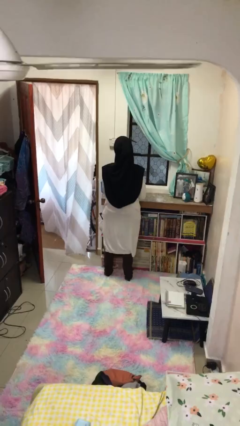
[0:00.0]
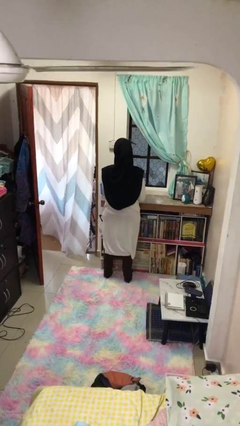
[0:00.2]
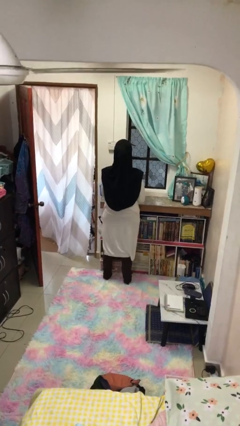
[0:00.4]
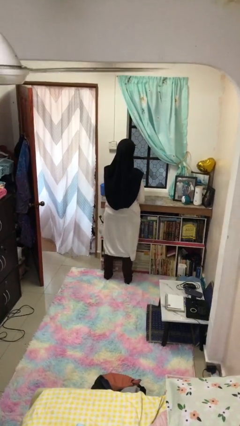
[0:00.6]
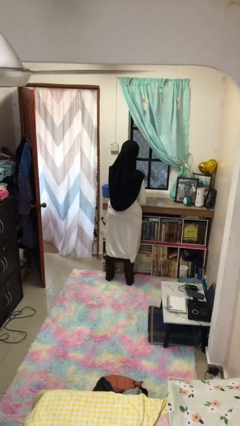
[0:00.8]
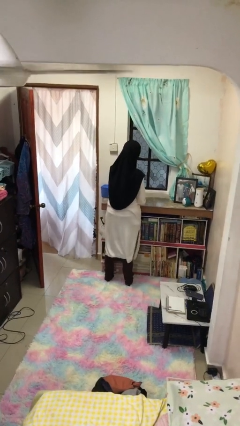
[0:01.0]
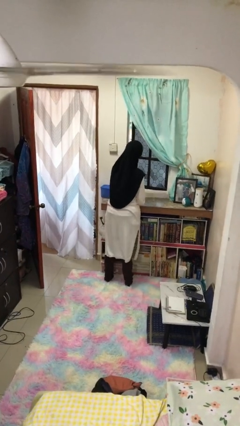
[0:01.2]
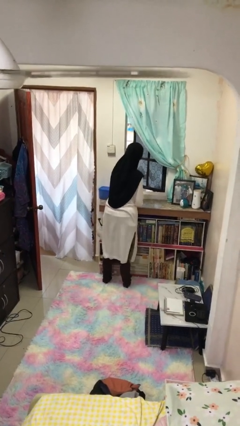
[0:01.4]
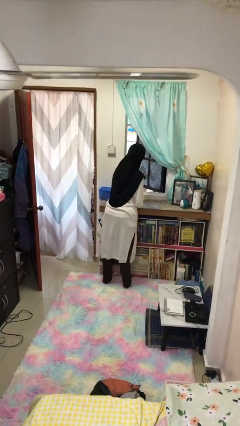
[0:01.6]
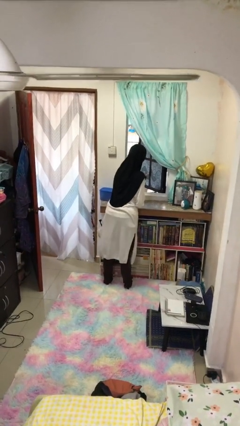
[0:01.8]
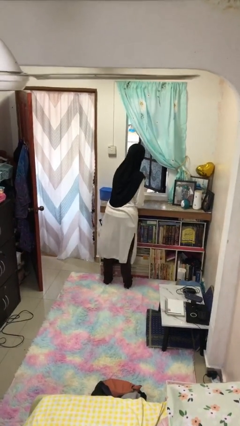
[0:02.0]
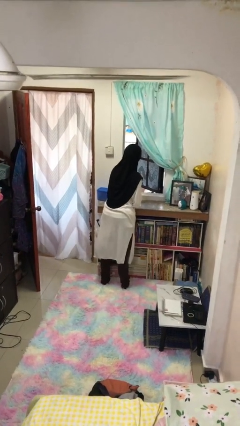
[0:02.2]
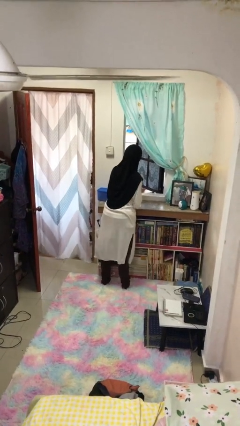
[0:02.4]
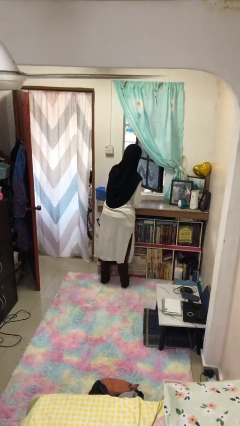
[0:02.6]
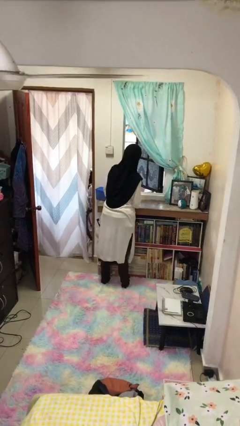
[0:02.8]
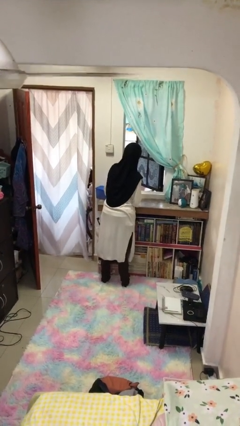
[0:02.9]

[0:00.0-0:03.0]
person opens home window

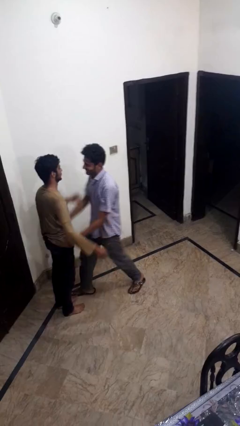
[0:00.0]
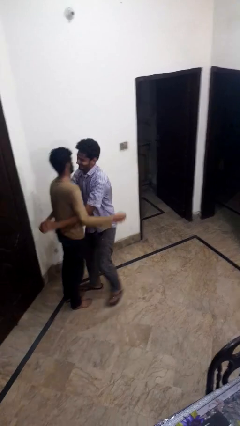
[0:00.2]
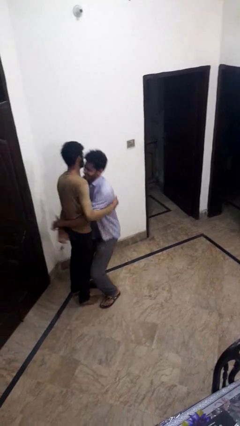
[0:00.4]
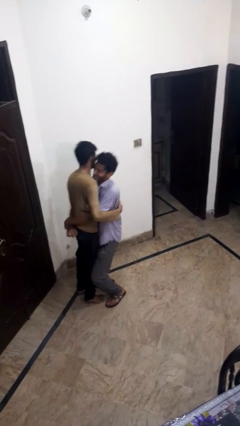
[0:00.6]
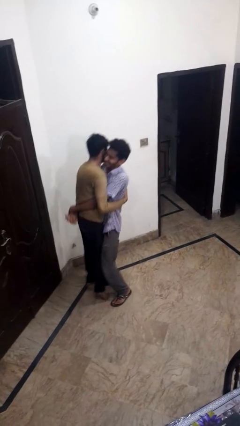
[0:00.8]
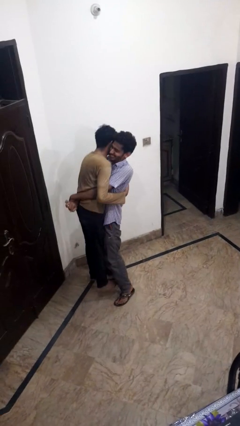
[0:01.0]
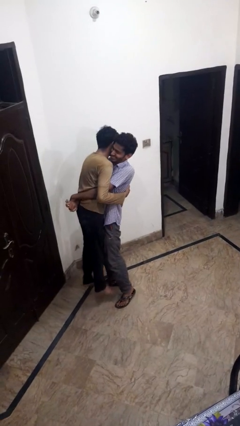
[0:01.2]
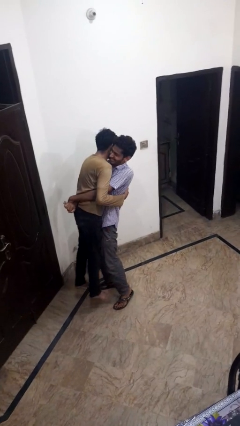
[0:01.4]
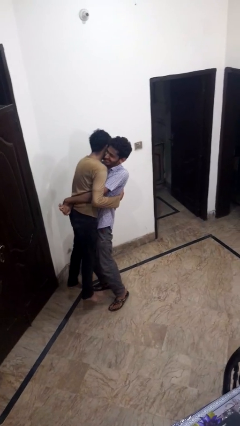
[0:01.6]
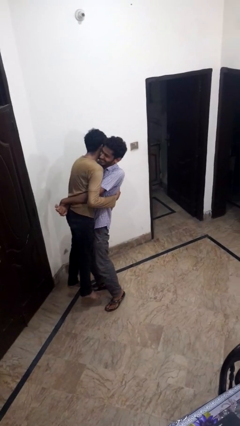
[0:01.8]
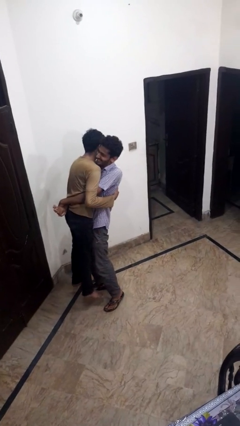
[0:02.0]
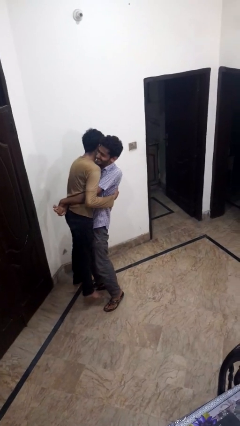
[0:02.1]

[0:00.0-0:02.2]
person picks up person

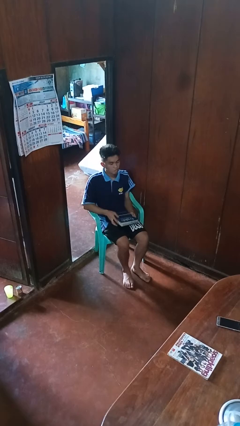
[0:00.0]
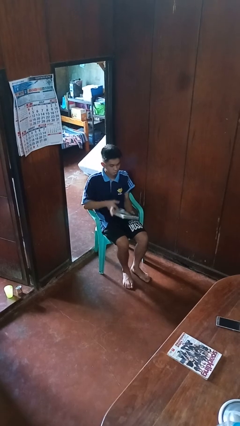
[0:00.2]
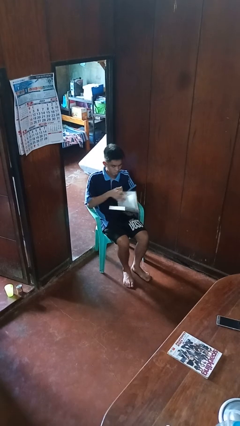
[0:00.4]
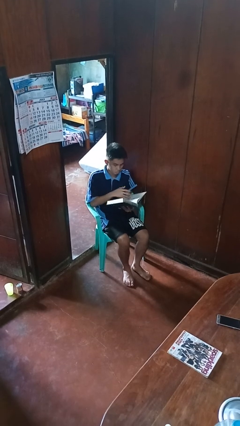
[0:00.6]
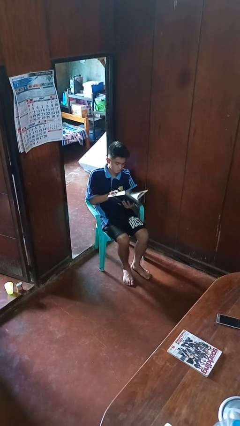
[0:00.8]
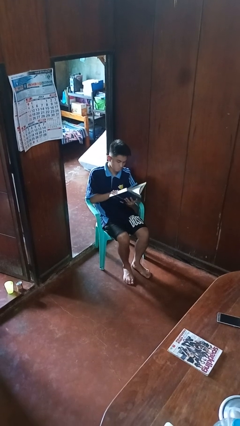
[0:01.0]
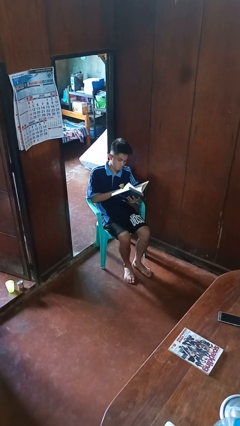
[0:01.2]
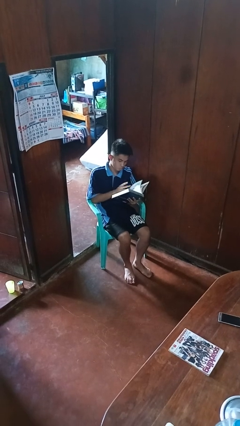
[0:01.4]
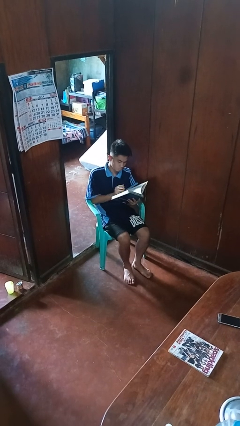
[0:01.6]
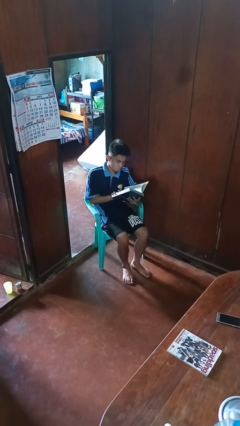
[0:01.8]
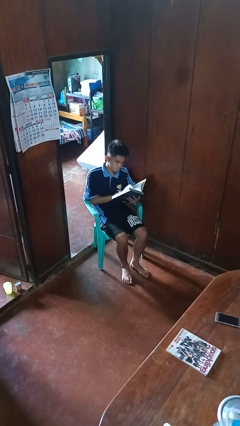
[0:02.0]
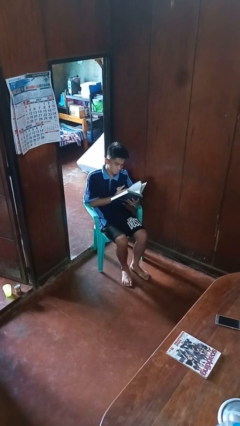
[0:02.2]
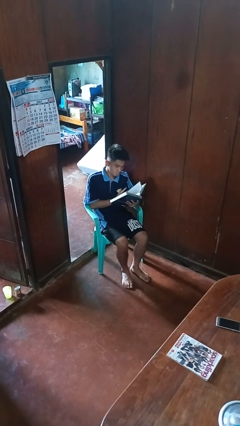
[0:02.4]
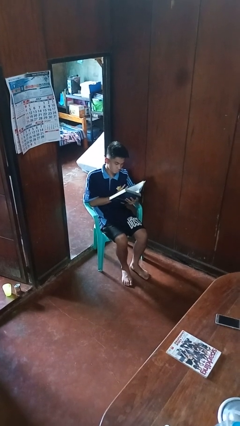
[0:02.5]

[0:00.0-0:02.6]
person reads book

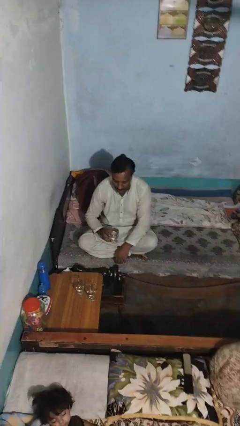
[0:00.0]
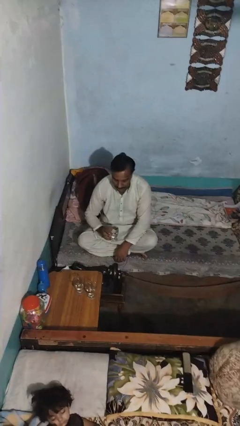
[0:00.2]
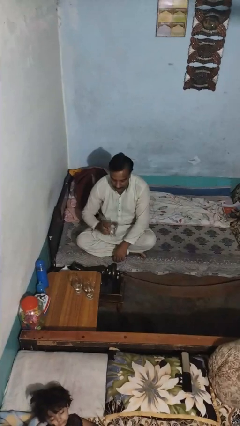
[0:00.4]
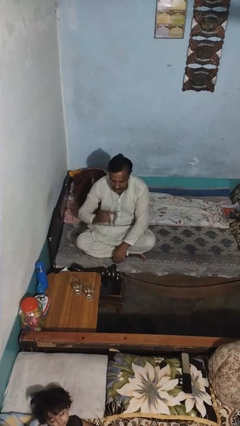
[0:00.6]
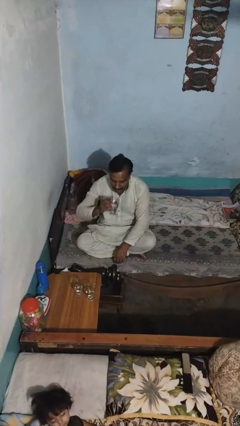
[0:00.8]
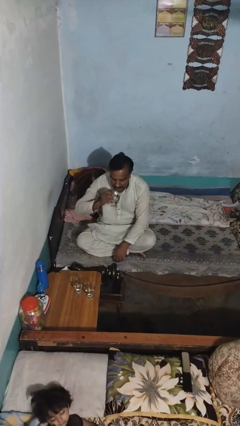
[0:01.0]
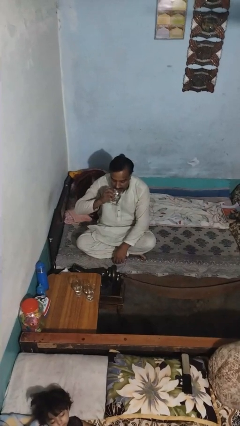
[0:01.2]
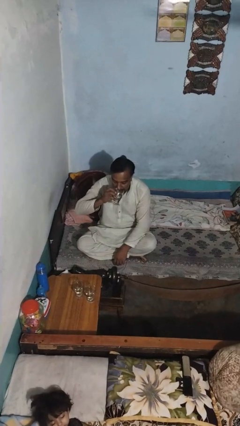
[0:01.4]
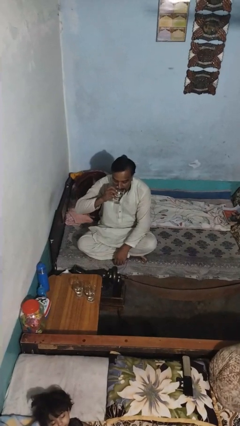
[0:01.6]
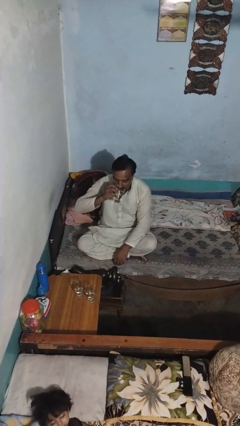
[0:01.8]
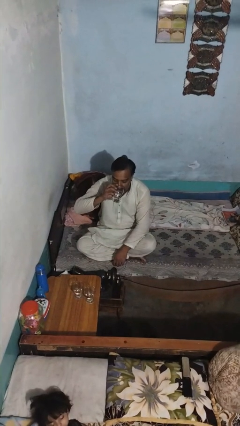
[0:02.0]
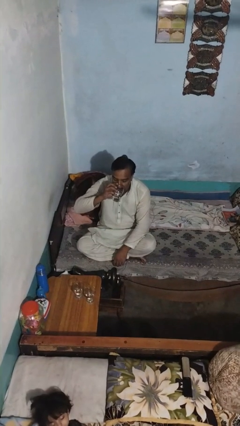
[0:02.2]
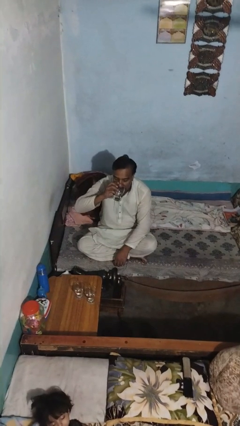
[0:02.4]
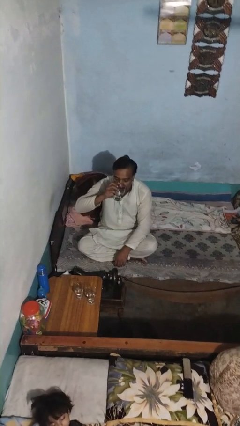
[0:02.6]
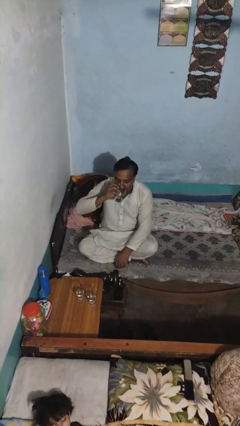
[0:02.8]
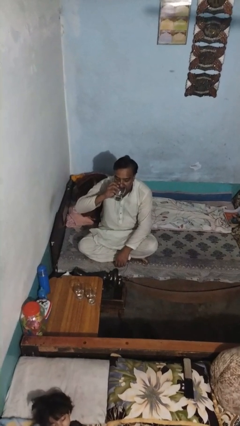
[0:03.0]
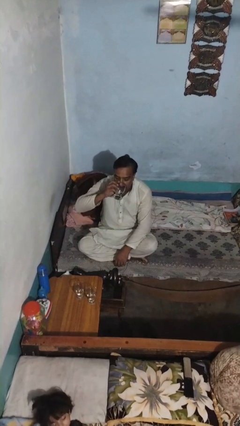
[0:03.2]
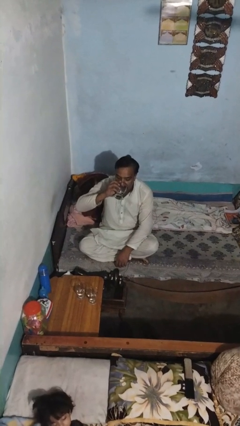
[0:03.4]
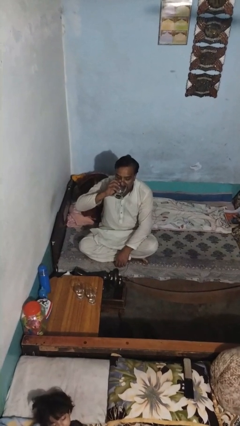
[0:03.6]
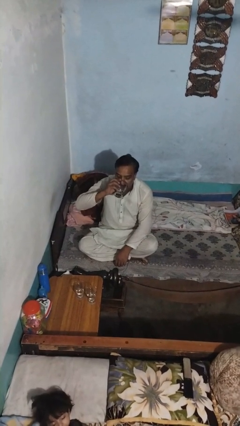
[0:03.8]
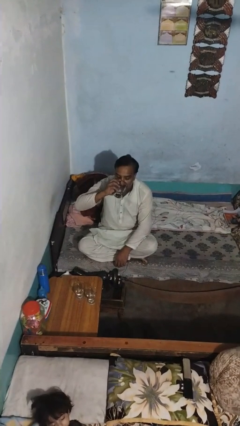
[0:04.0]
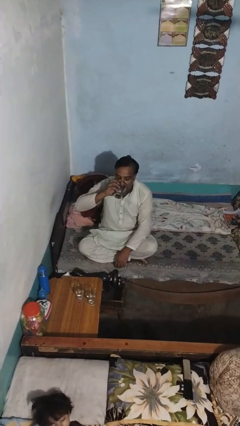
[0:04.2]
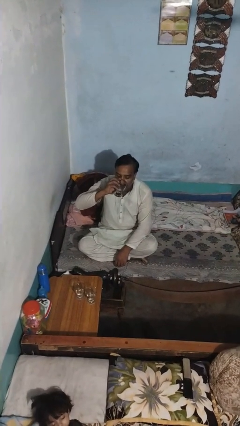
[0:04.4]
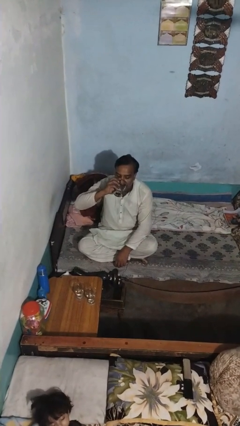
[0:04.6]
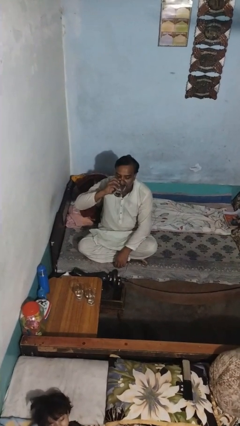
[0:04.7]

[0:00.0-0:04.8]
person drinks from shotglass

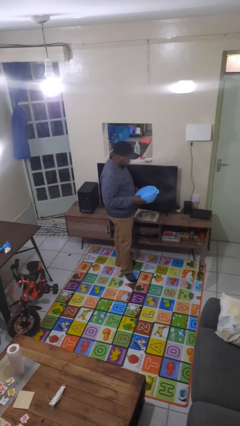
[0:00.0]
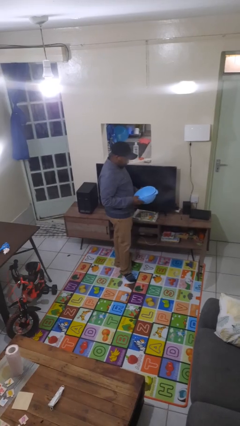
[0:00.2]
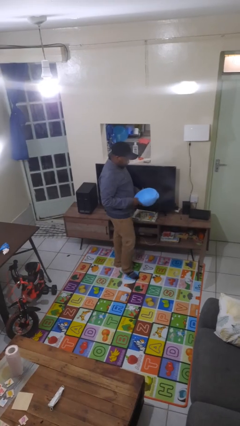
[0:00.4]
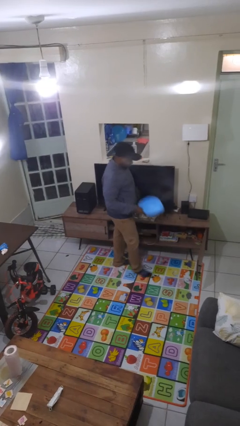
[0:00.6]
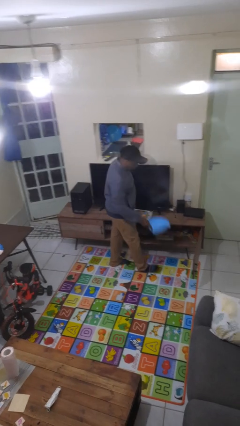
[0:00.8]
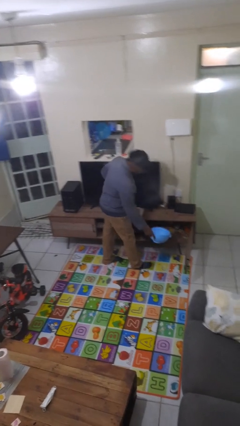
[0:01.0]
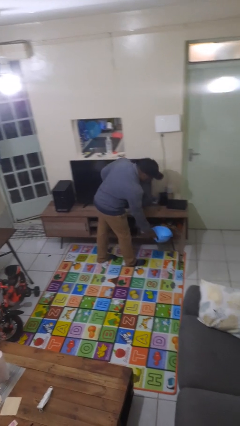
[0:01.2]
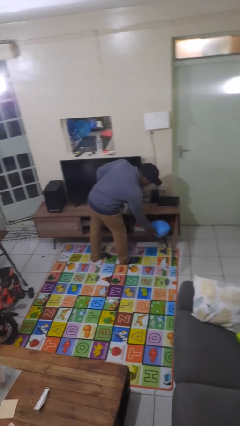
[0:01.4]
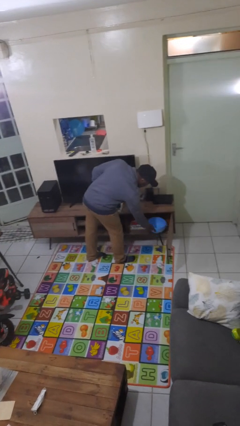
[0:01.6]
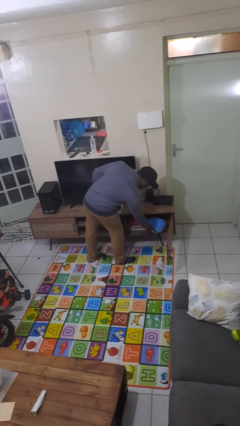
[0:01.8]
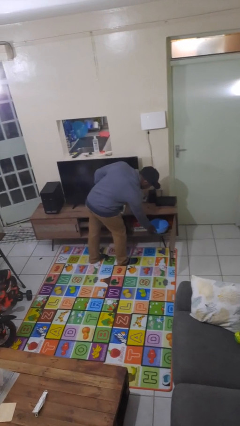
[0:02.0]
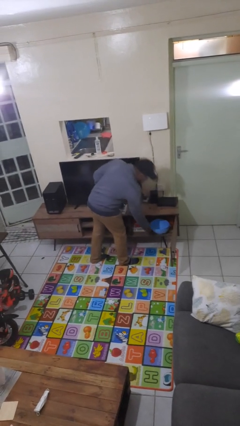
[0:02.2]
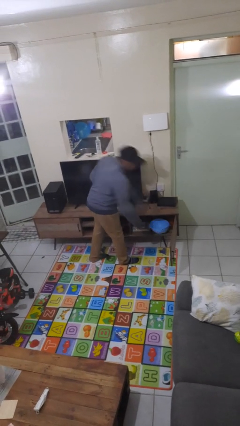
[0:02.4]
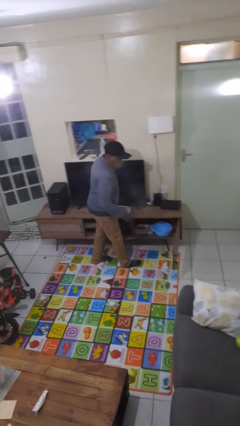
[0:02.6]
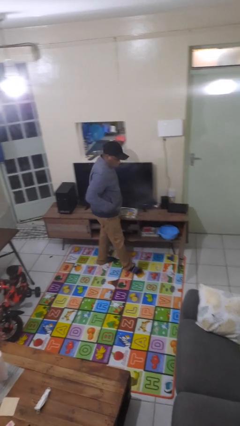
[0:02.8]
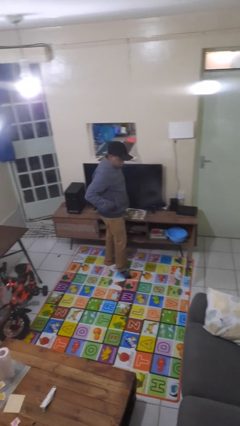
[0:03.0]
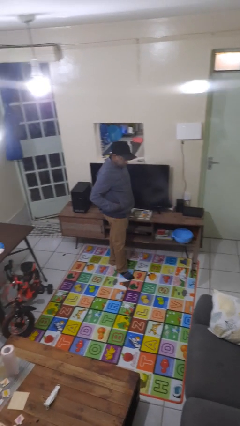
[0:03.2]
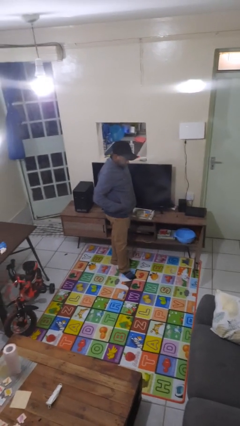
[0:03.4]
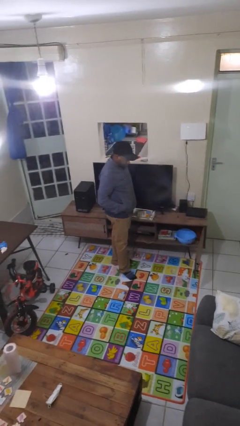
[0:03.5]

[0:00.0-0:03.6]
person puts down object into cabinet

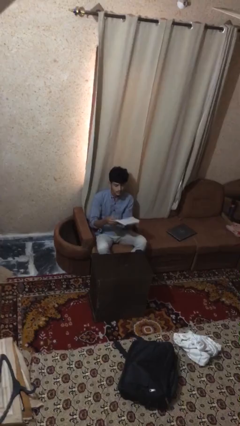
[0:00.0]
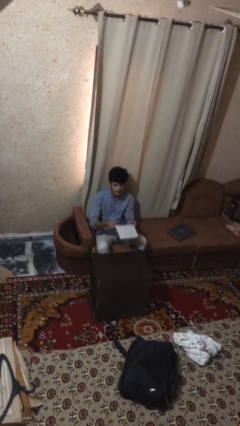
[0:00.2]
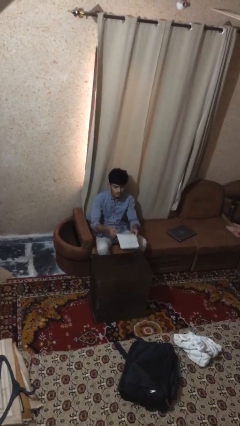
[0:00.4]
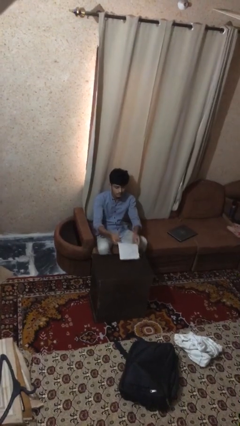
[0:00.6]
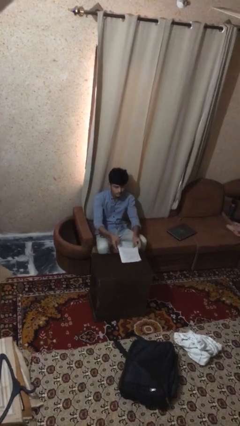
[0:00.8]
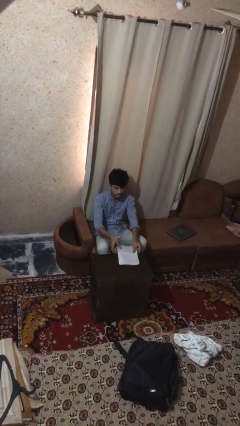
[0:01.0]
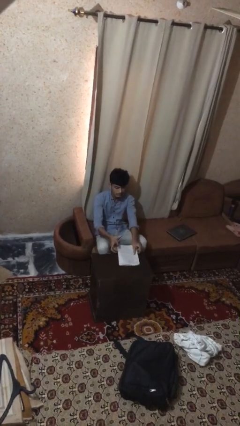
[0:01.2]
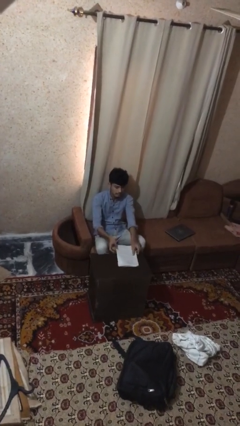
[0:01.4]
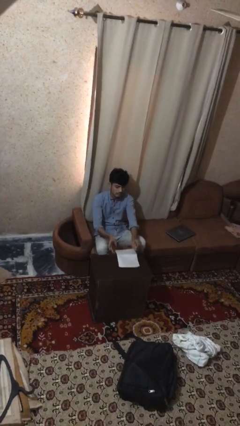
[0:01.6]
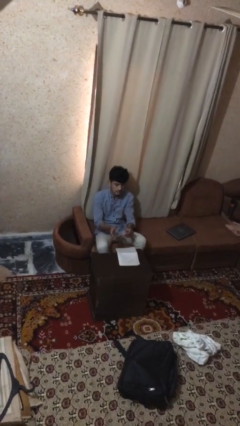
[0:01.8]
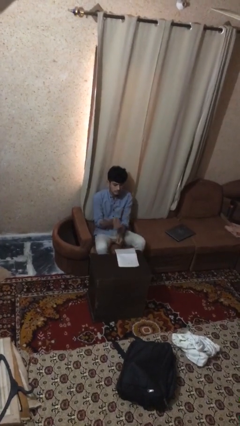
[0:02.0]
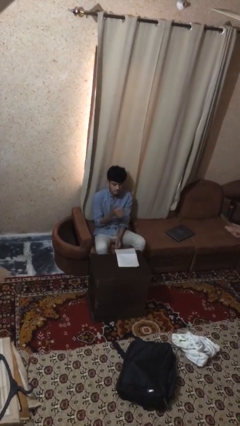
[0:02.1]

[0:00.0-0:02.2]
person puts down object on table
